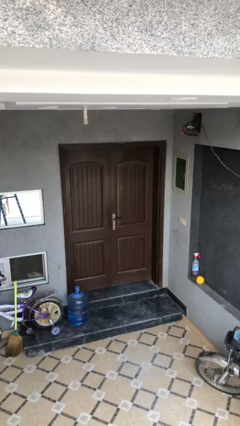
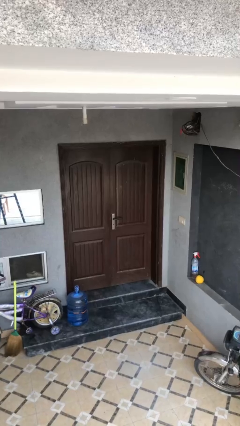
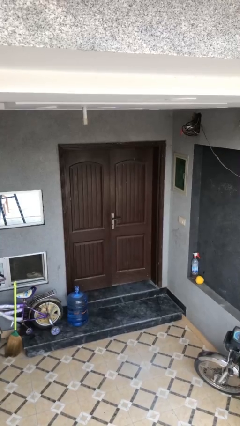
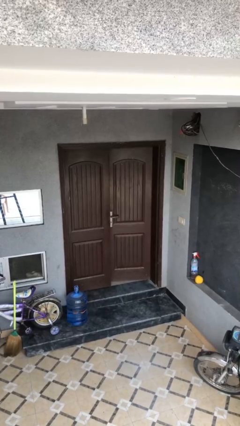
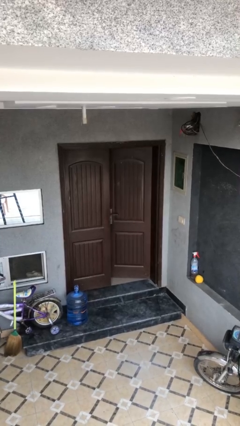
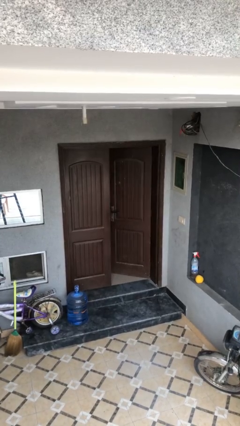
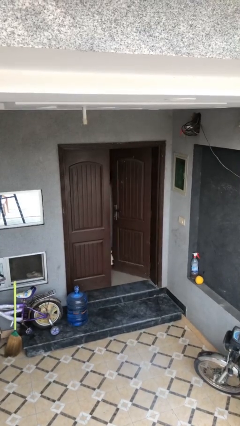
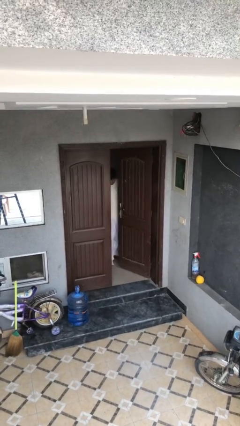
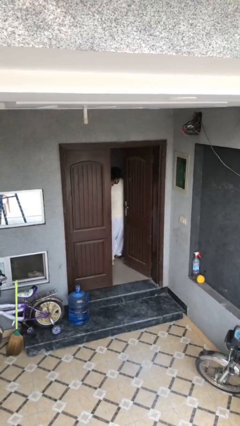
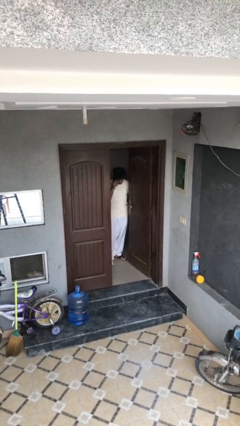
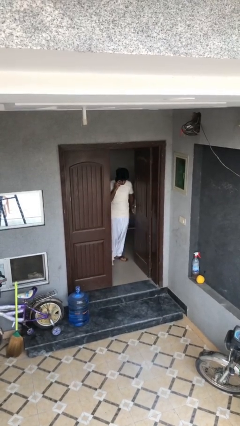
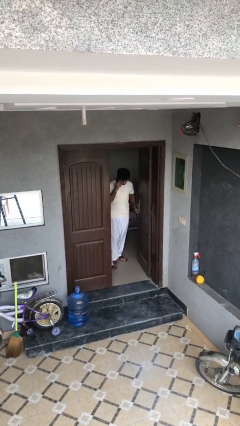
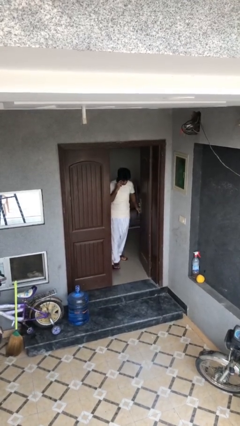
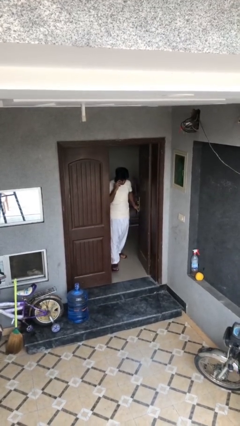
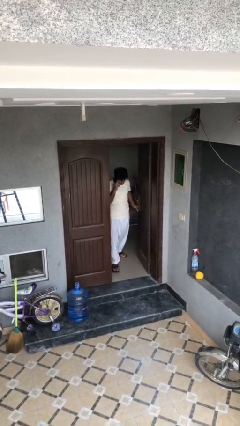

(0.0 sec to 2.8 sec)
person opens facility door

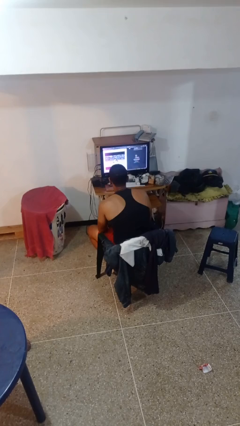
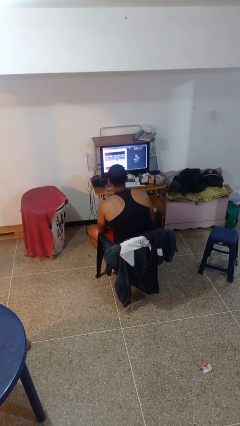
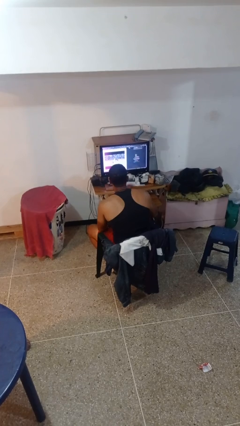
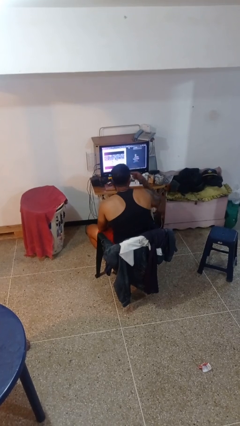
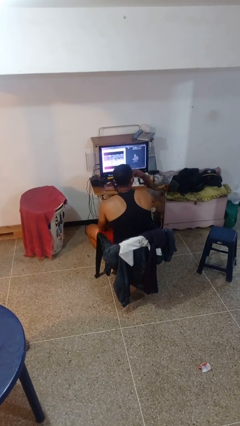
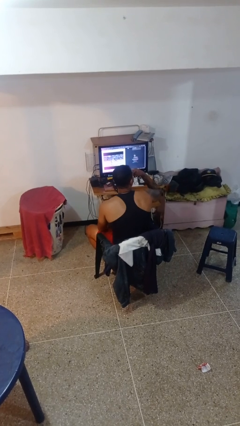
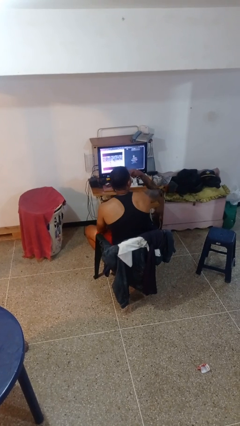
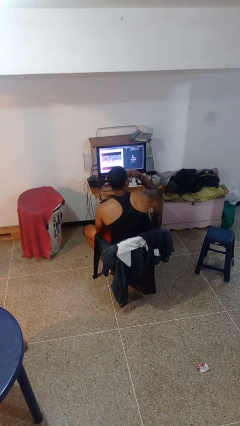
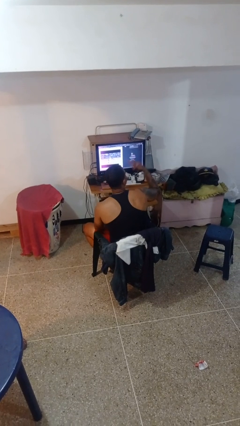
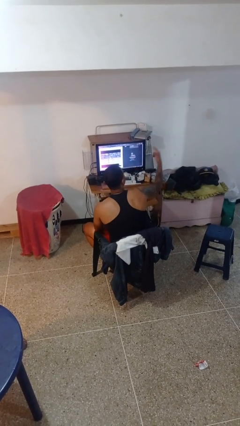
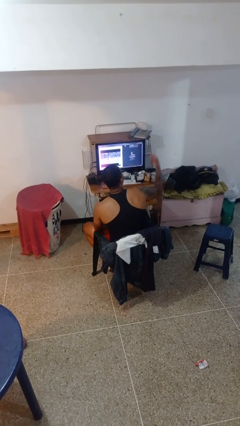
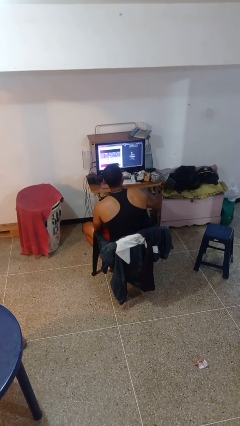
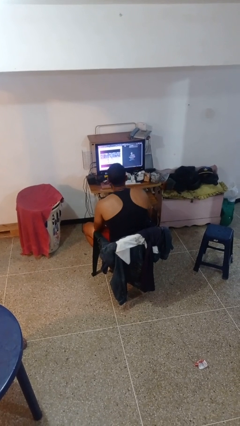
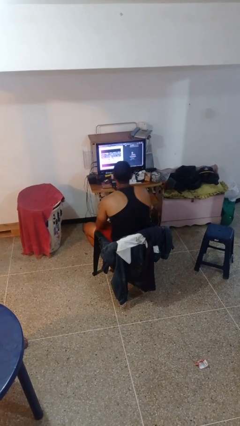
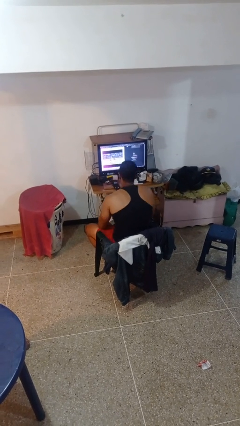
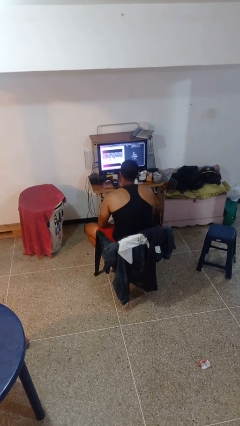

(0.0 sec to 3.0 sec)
person gestures watch closely

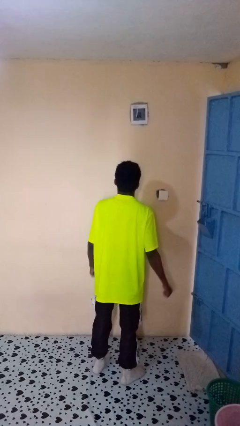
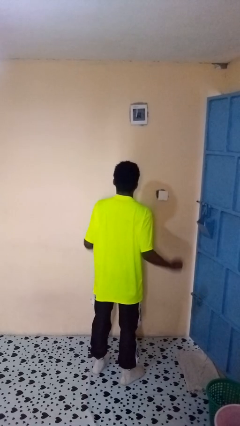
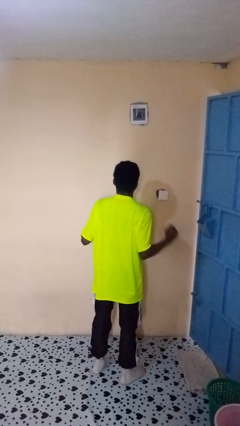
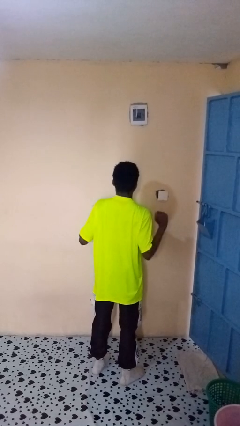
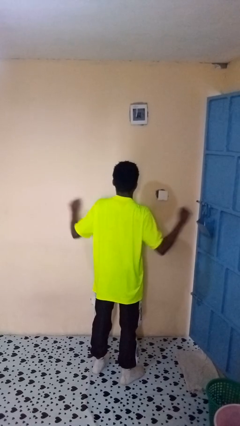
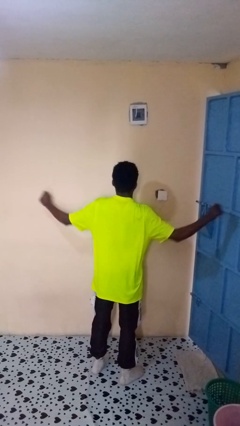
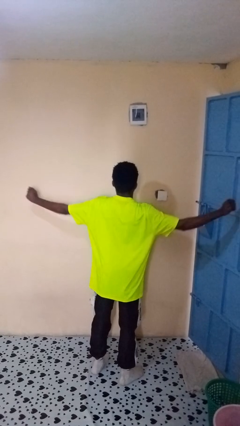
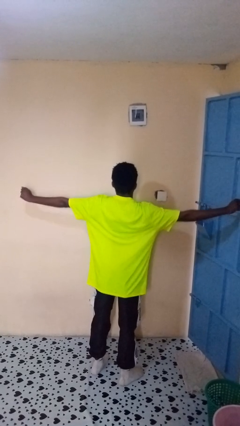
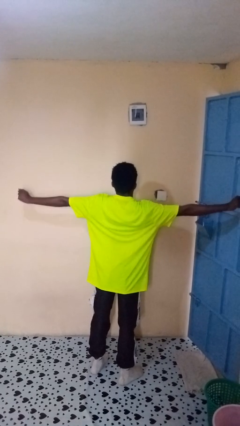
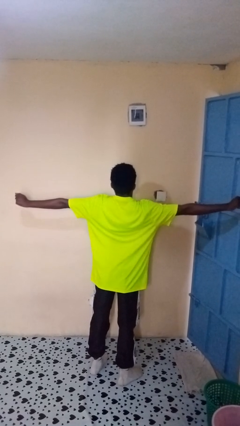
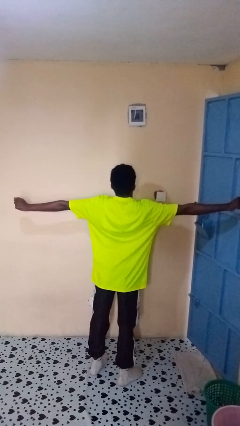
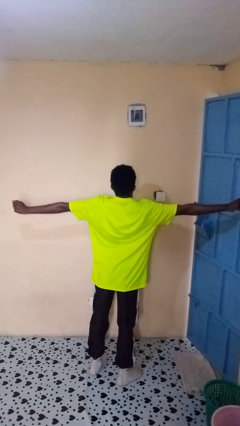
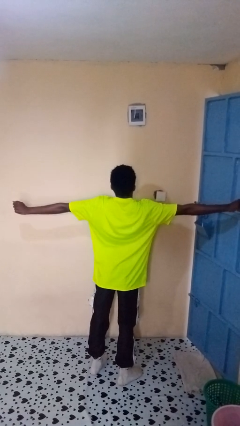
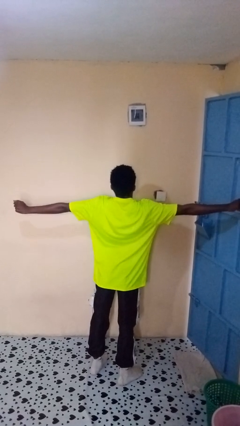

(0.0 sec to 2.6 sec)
person stretches arms to side

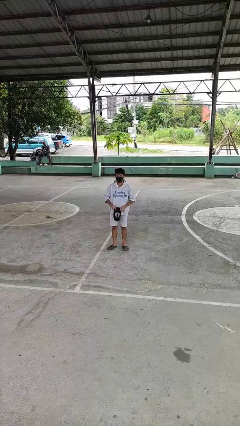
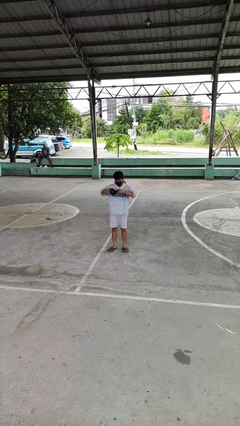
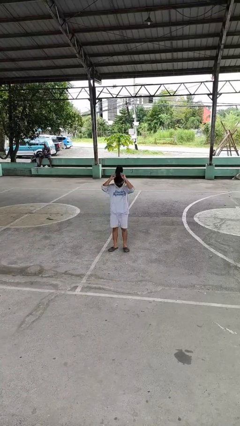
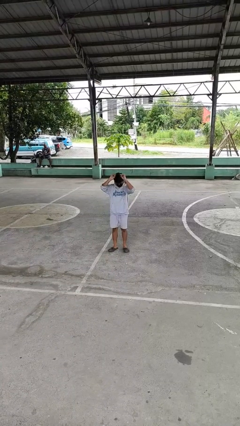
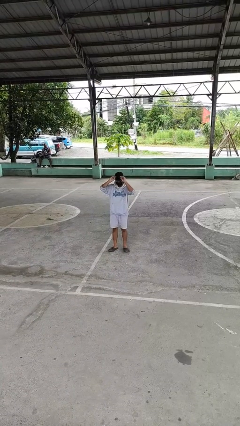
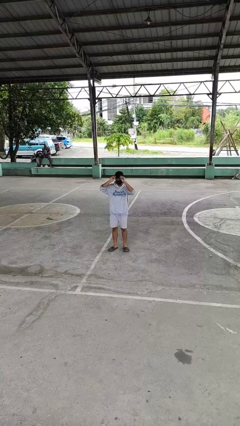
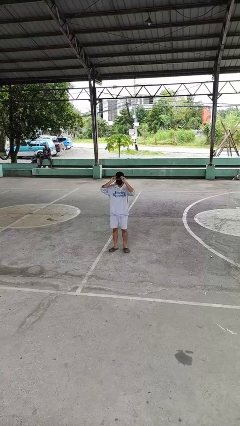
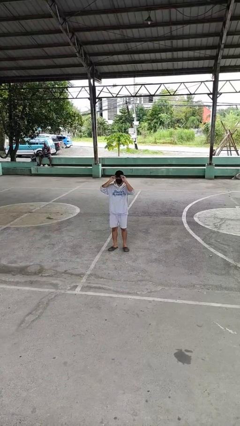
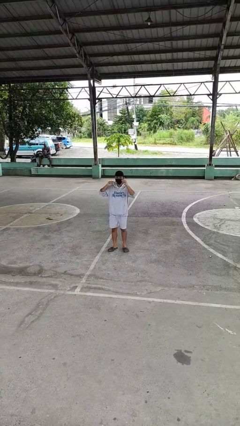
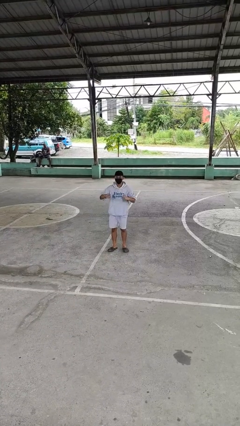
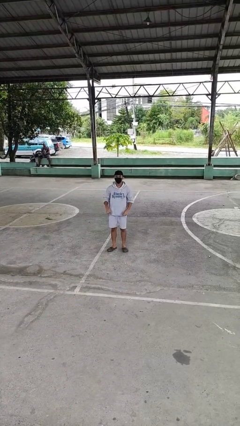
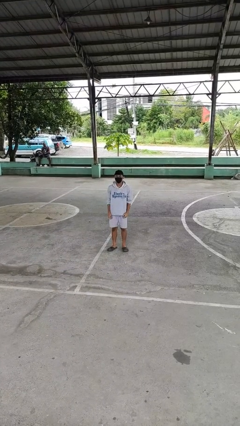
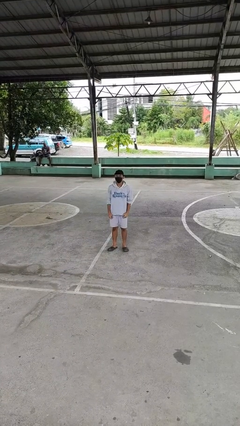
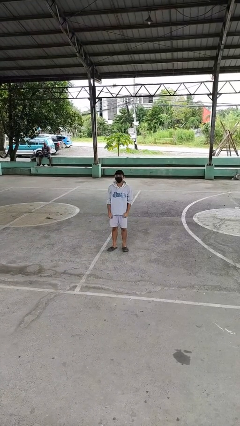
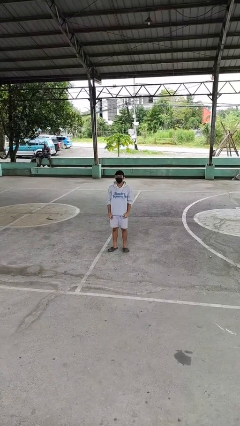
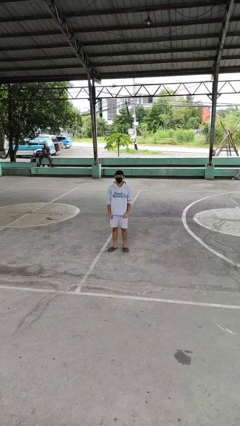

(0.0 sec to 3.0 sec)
person puts on hat

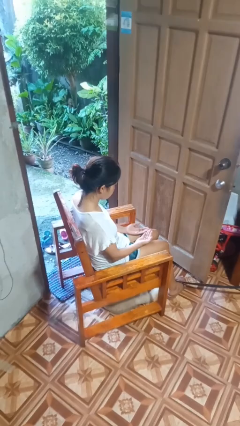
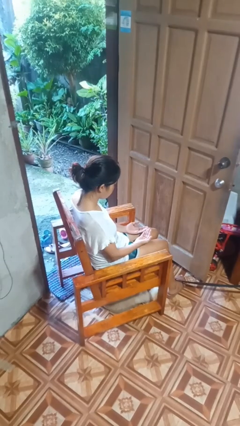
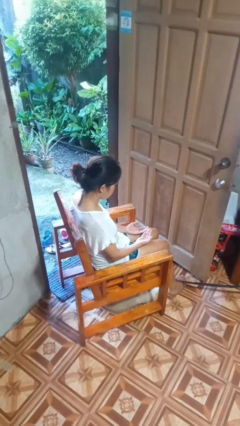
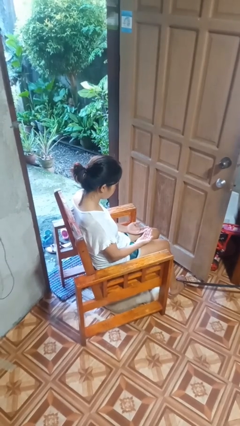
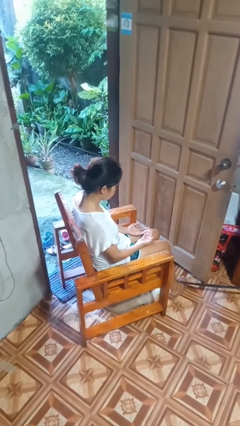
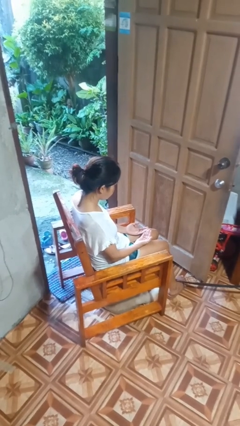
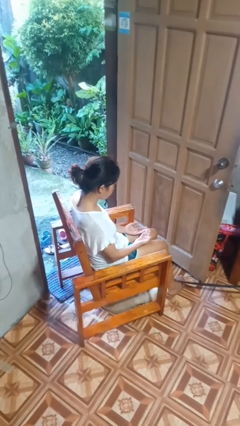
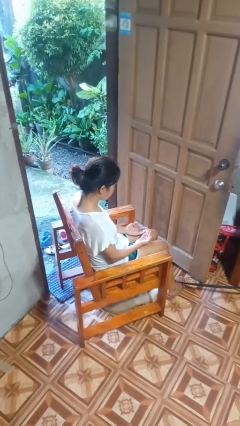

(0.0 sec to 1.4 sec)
person looks at hands in lap

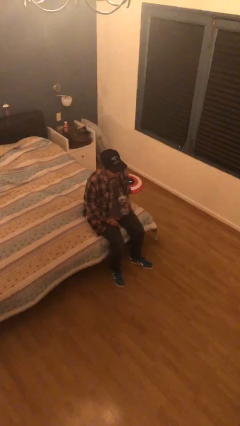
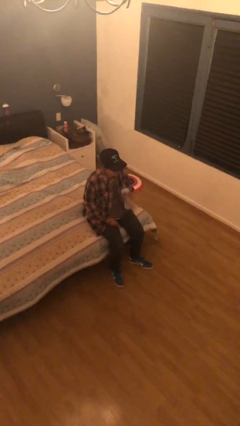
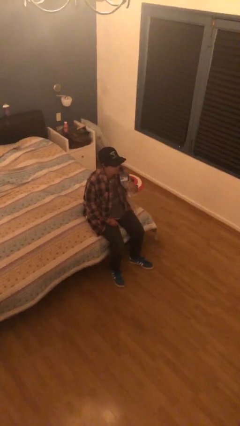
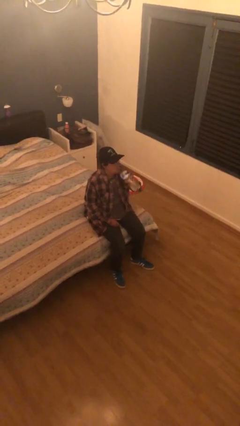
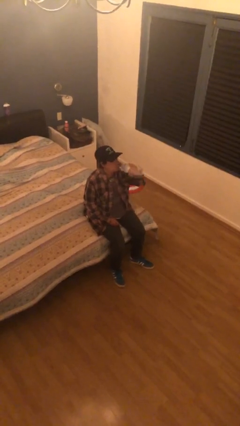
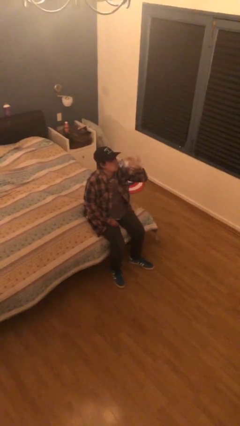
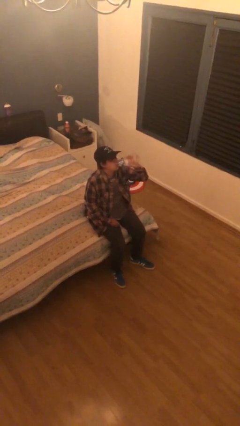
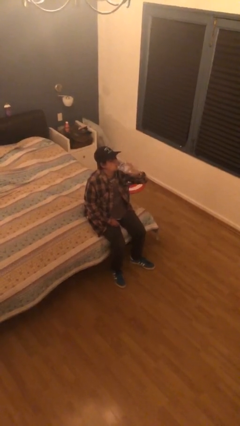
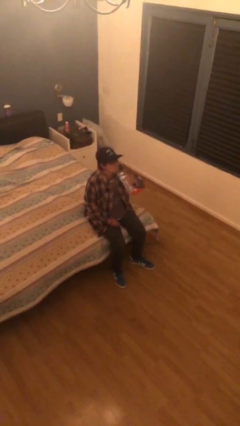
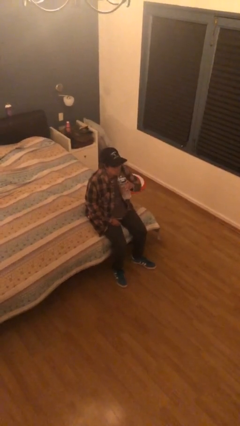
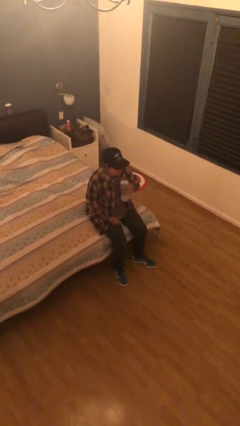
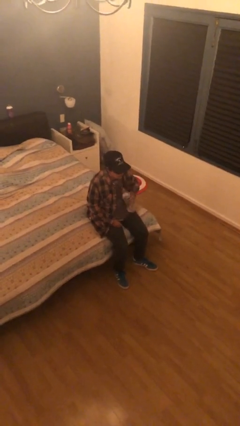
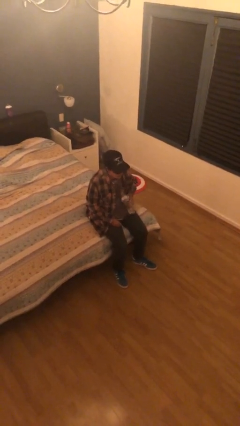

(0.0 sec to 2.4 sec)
person drinks from bottle

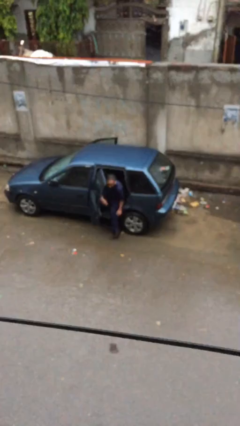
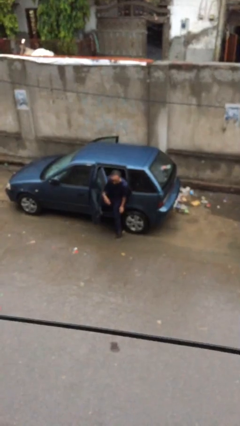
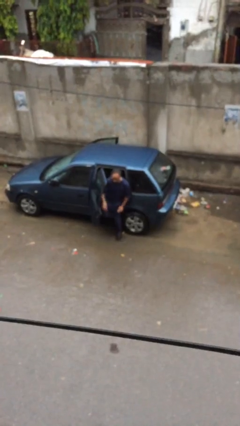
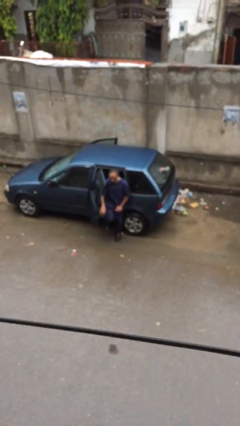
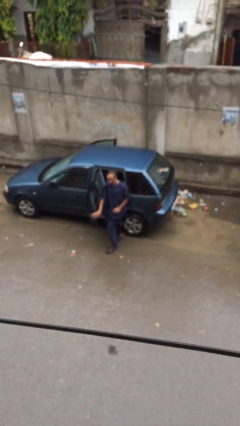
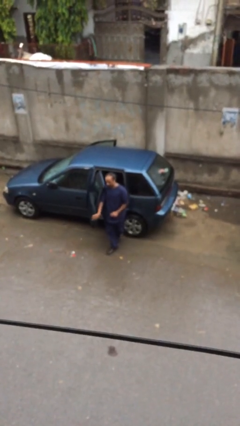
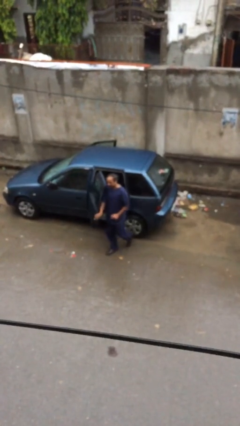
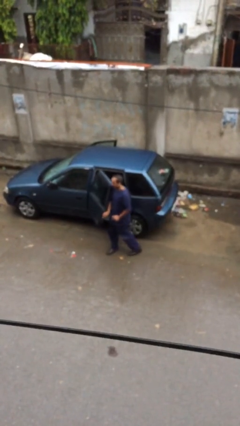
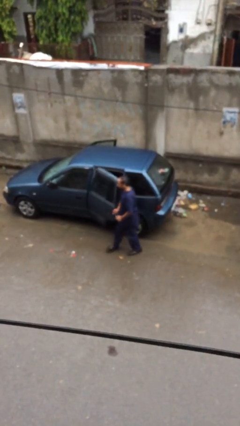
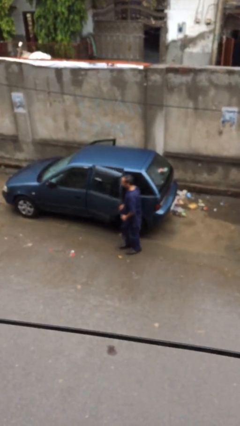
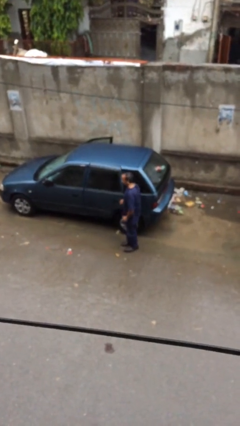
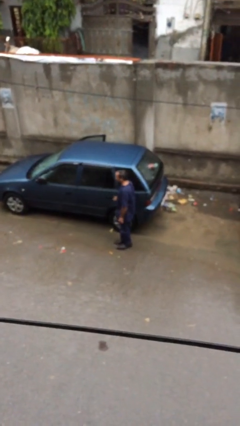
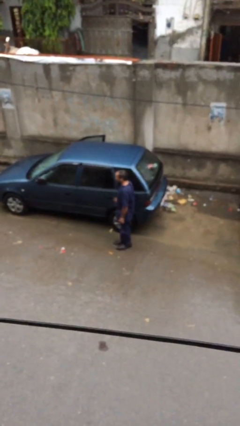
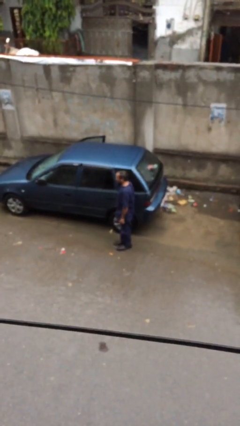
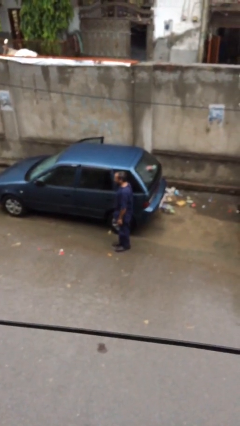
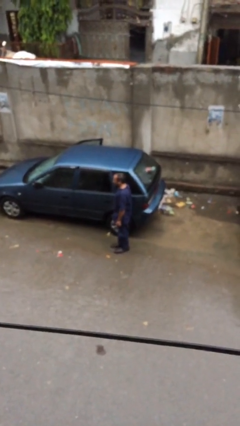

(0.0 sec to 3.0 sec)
person closes car door
